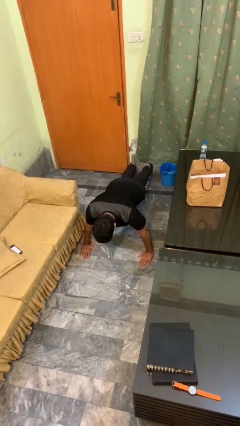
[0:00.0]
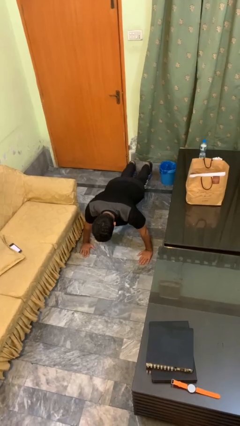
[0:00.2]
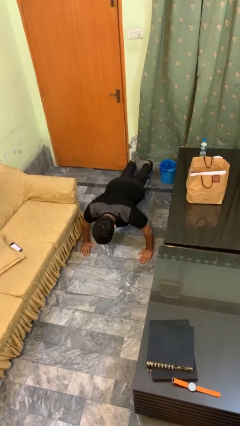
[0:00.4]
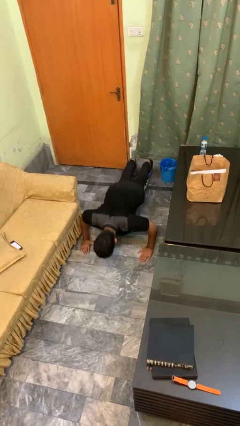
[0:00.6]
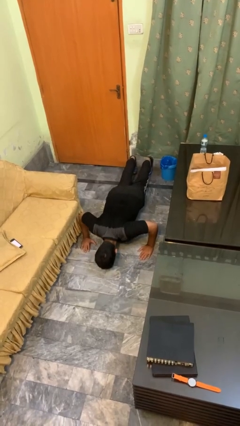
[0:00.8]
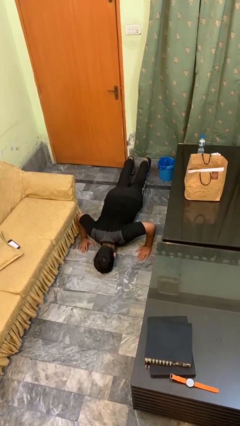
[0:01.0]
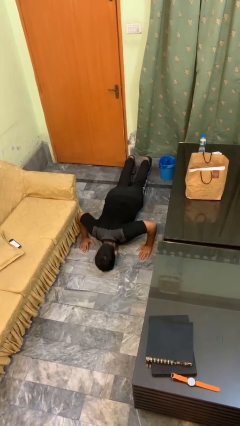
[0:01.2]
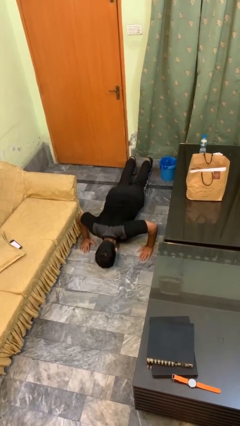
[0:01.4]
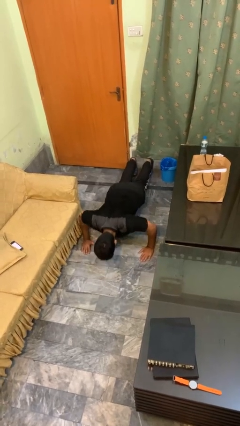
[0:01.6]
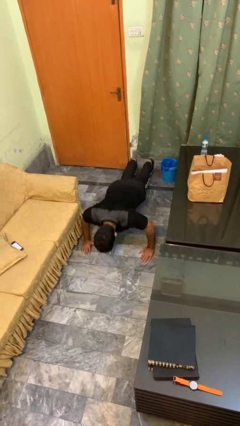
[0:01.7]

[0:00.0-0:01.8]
person exercises with pushup

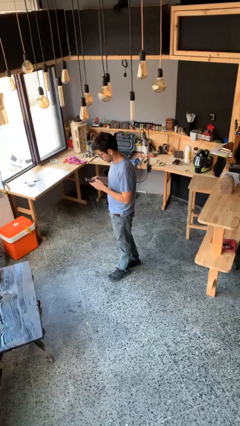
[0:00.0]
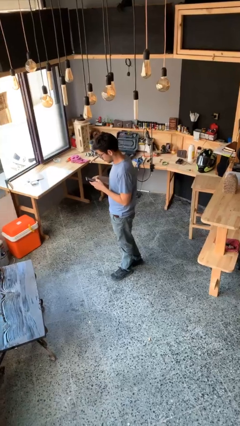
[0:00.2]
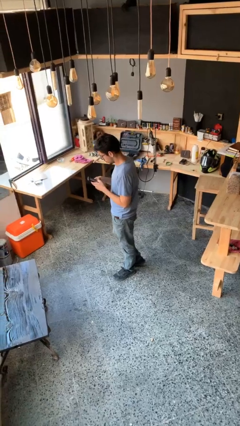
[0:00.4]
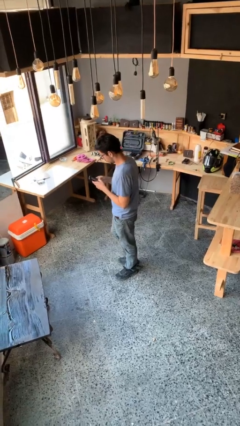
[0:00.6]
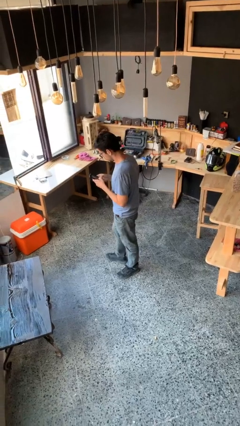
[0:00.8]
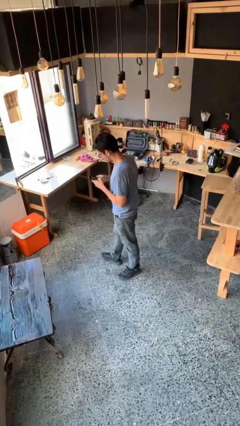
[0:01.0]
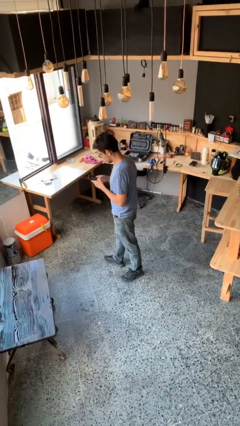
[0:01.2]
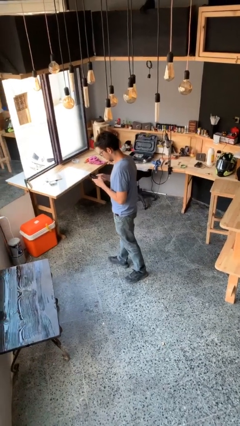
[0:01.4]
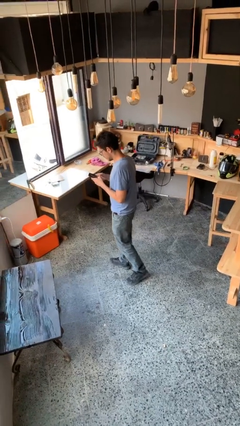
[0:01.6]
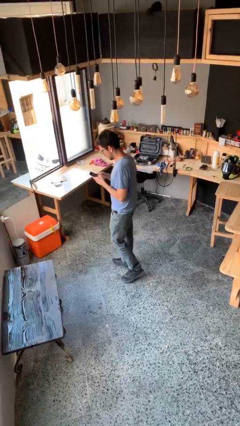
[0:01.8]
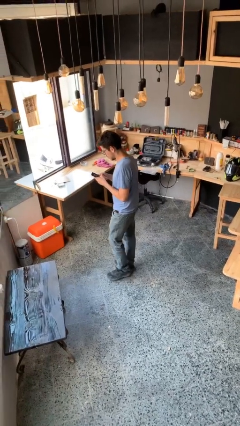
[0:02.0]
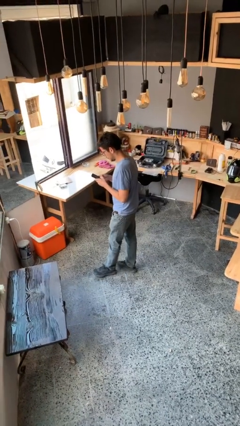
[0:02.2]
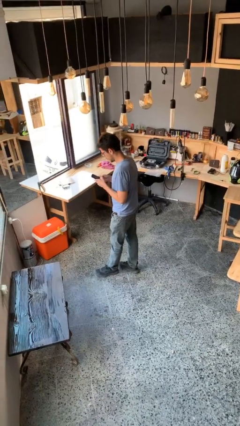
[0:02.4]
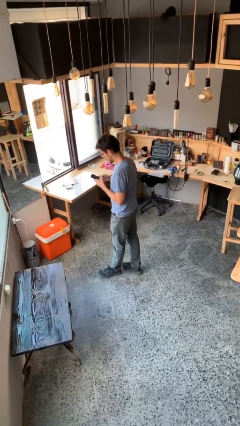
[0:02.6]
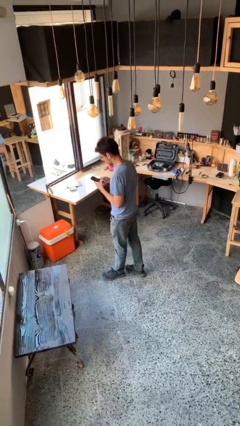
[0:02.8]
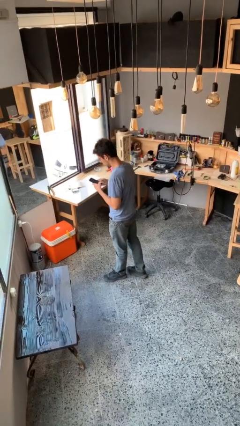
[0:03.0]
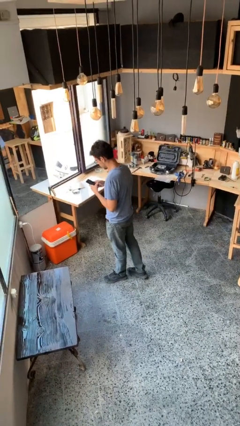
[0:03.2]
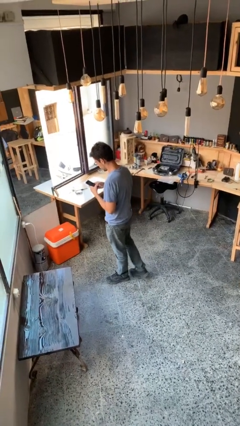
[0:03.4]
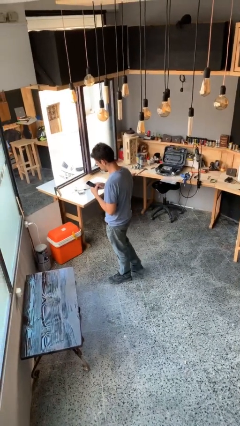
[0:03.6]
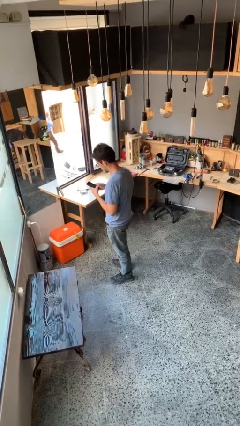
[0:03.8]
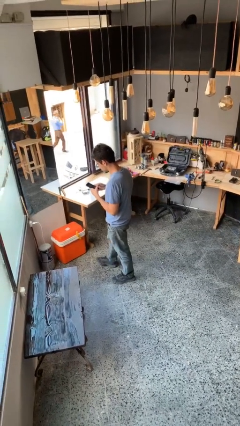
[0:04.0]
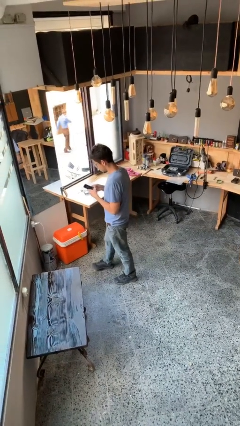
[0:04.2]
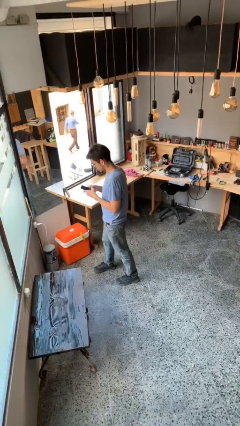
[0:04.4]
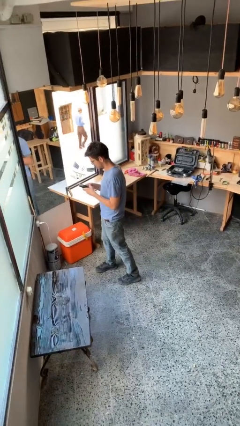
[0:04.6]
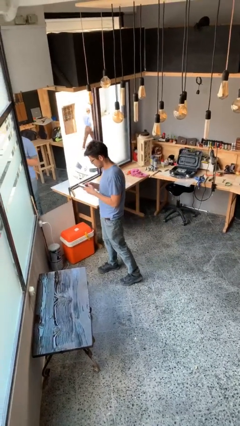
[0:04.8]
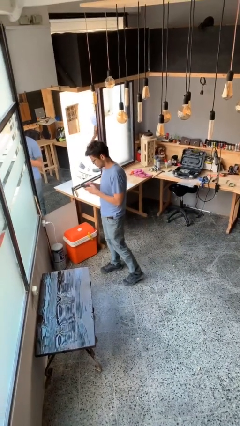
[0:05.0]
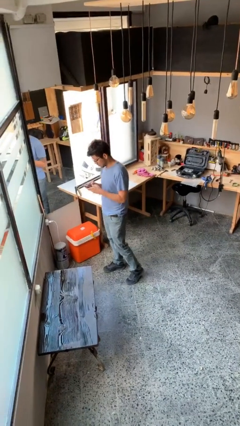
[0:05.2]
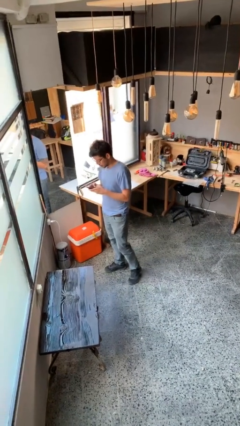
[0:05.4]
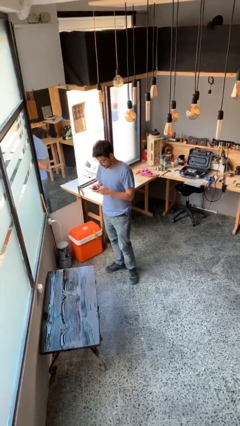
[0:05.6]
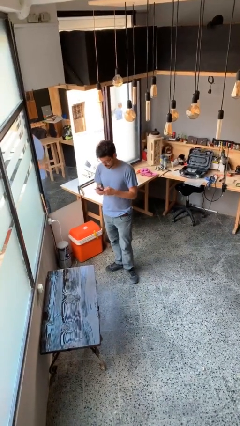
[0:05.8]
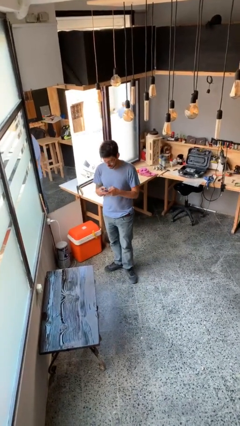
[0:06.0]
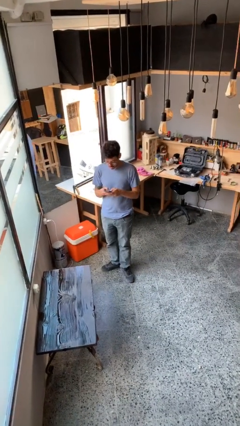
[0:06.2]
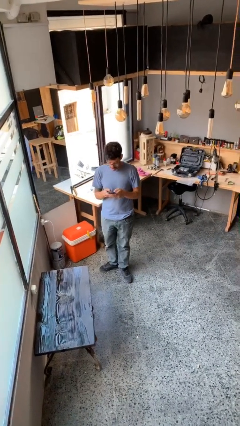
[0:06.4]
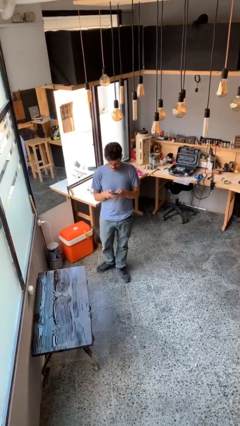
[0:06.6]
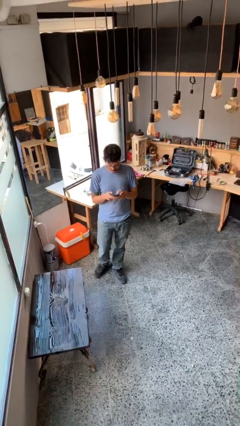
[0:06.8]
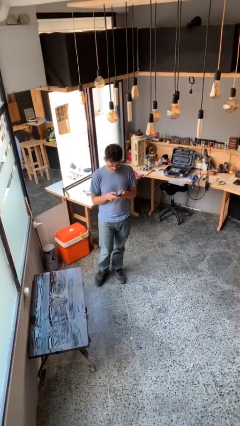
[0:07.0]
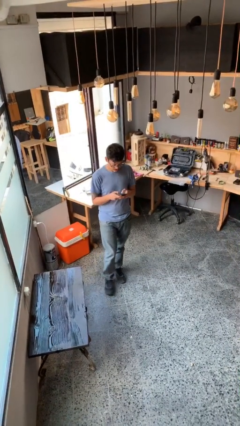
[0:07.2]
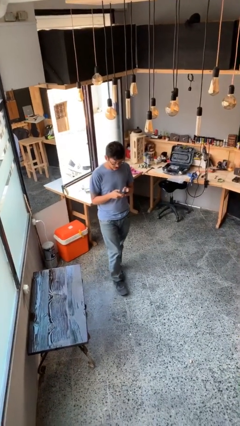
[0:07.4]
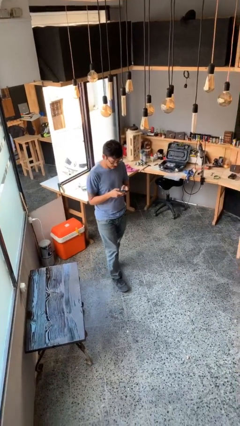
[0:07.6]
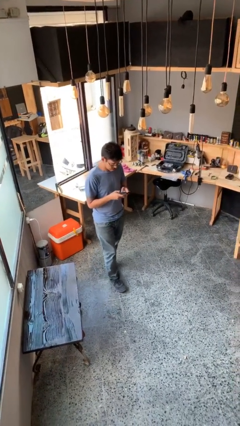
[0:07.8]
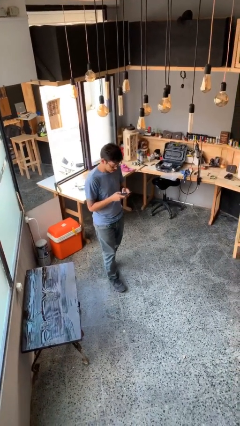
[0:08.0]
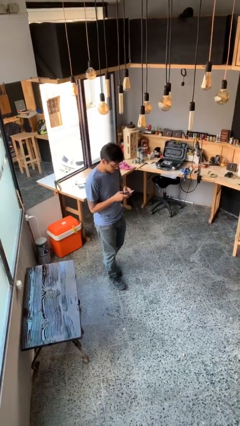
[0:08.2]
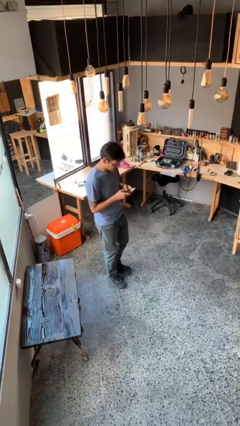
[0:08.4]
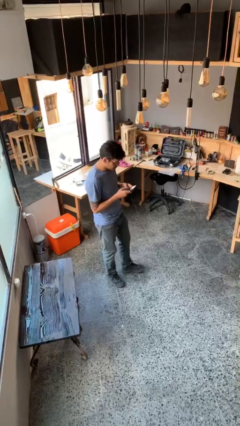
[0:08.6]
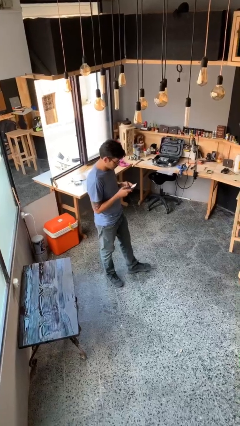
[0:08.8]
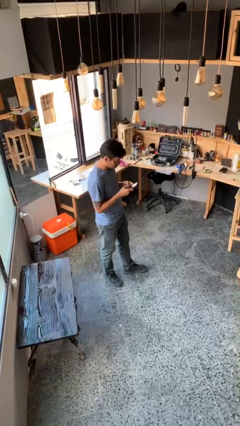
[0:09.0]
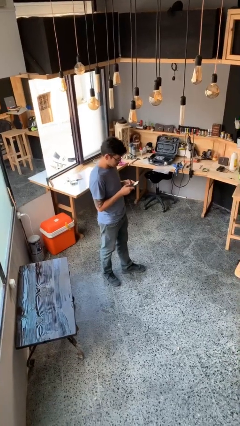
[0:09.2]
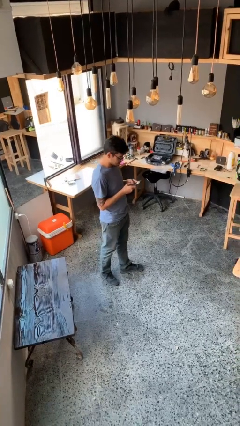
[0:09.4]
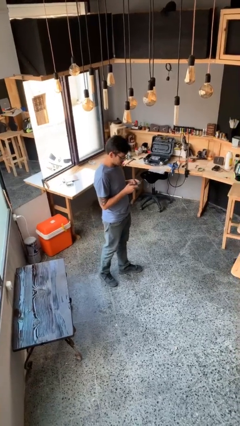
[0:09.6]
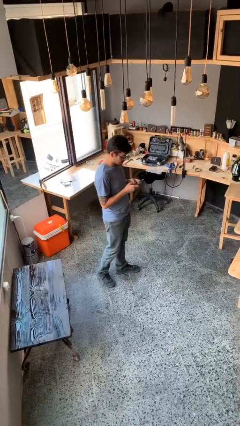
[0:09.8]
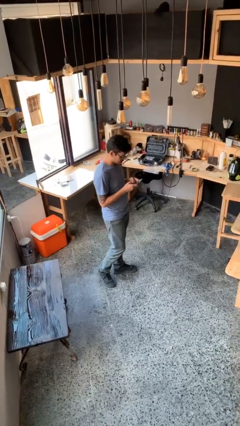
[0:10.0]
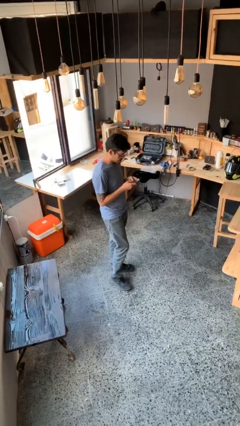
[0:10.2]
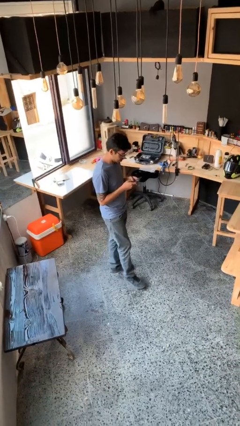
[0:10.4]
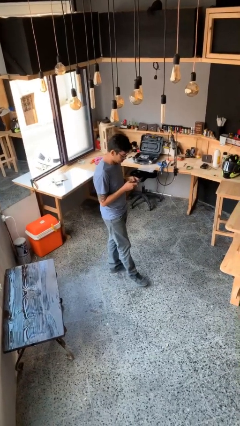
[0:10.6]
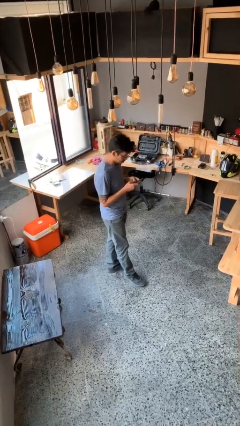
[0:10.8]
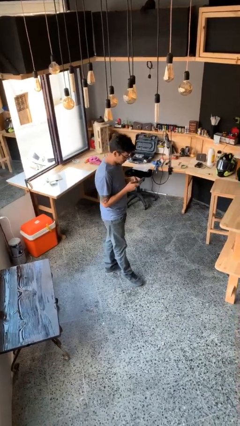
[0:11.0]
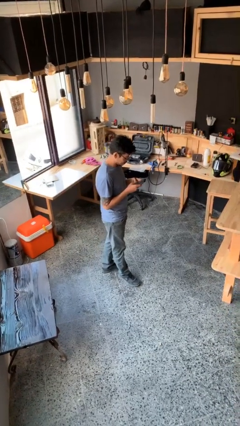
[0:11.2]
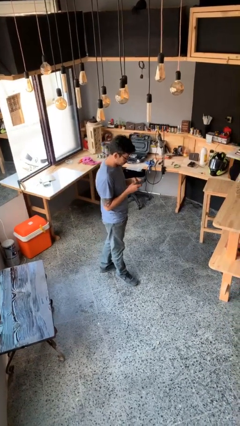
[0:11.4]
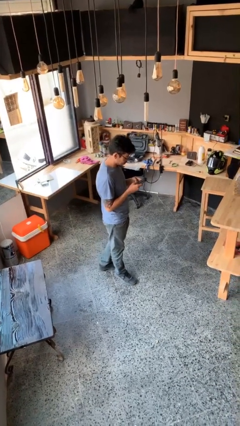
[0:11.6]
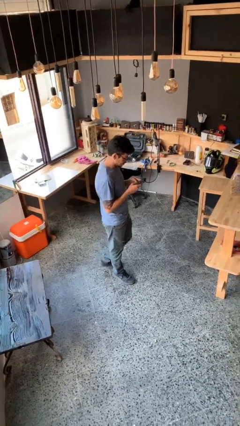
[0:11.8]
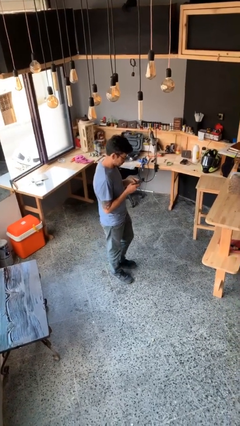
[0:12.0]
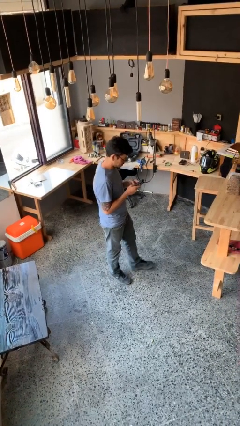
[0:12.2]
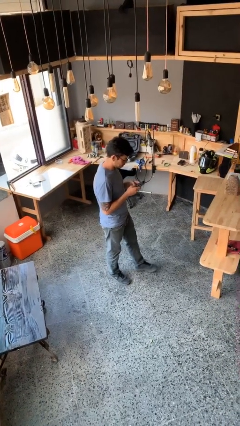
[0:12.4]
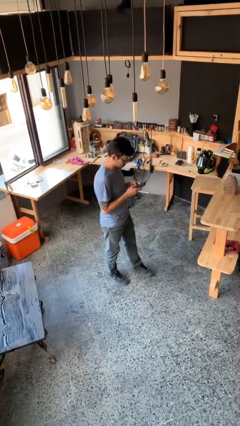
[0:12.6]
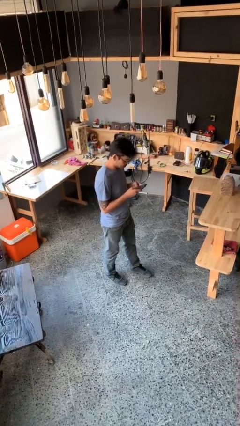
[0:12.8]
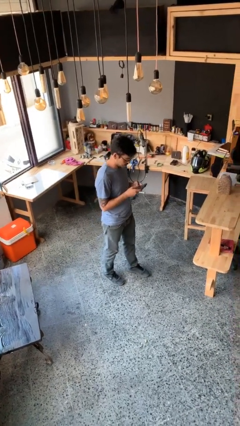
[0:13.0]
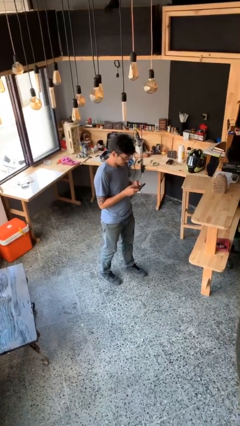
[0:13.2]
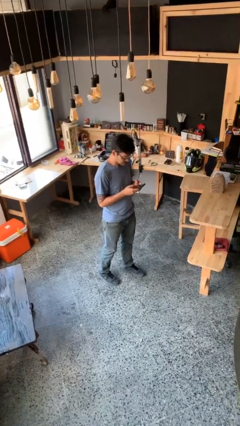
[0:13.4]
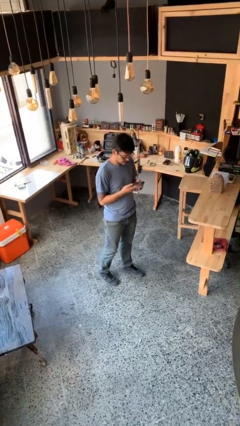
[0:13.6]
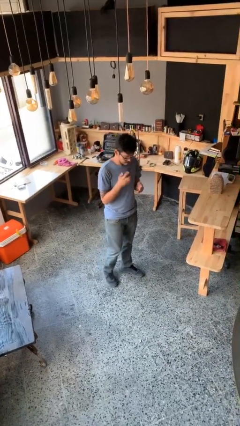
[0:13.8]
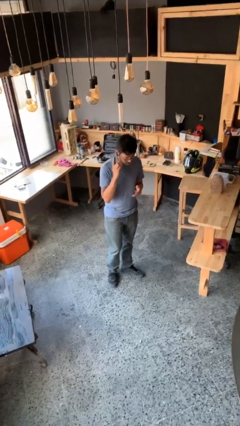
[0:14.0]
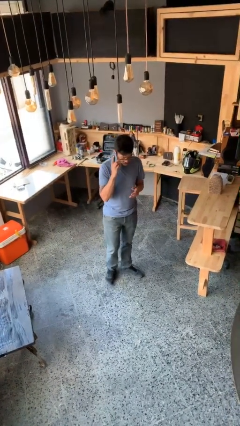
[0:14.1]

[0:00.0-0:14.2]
person texts on phone

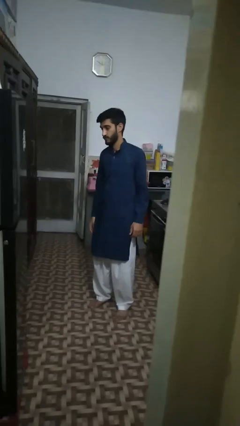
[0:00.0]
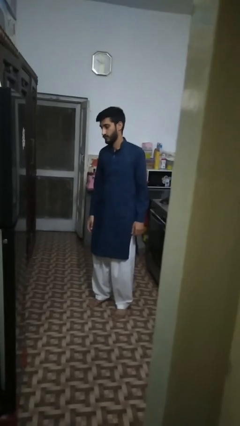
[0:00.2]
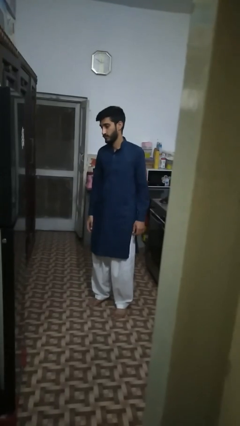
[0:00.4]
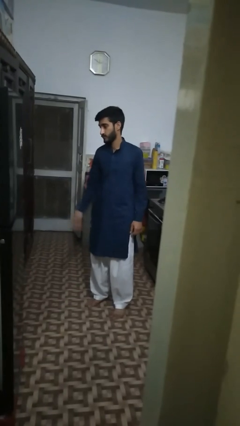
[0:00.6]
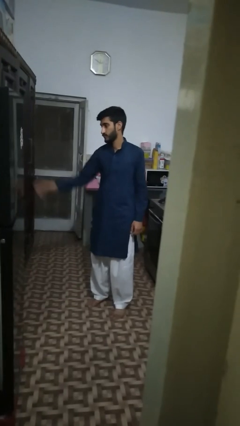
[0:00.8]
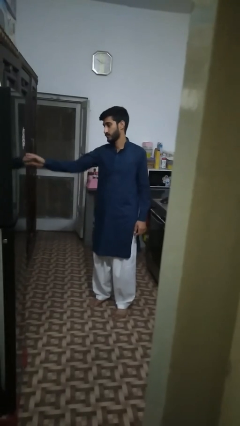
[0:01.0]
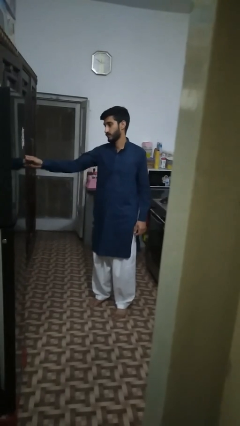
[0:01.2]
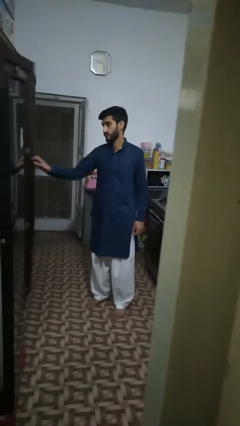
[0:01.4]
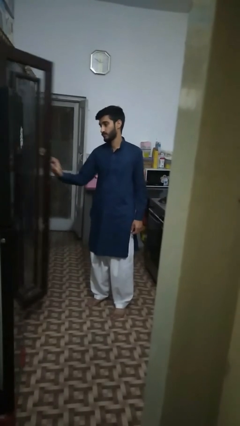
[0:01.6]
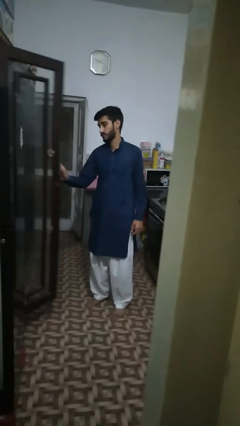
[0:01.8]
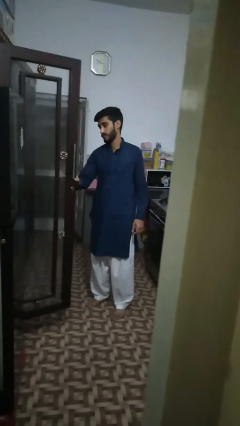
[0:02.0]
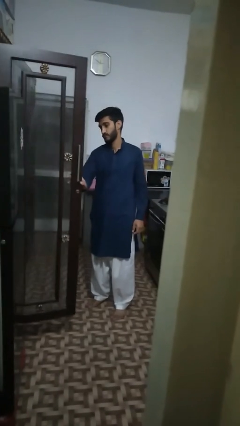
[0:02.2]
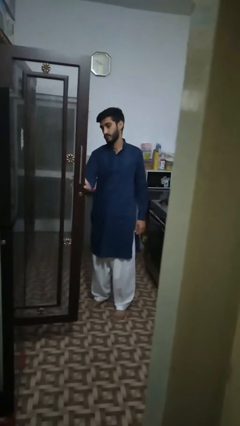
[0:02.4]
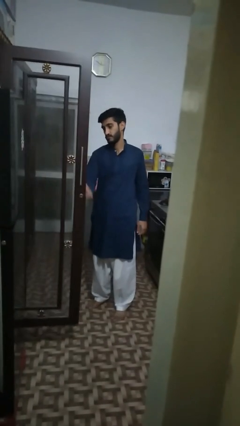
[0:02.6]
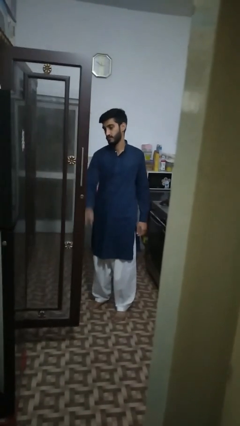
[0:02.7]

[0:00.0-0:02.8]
person opens cabinet
